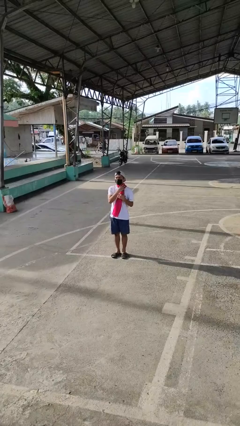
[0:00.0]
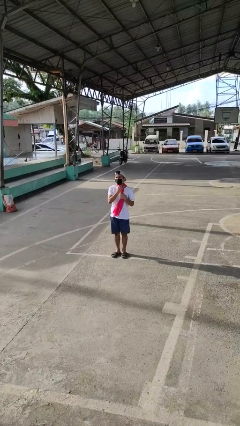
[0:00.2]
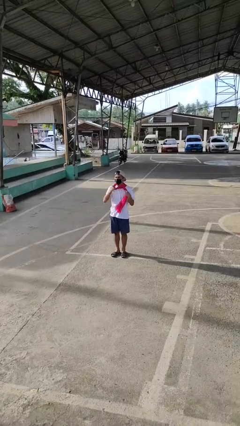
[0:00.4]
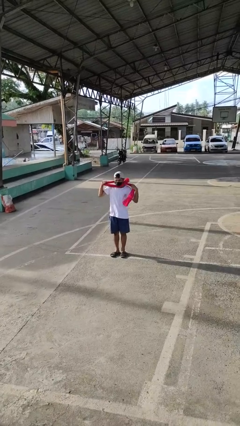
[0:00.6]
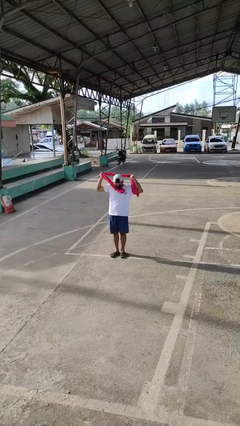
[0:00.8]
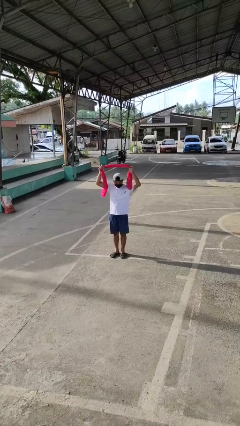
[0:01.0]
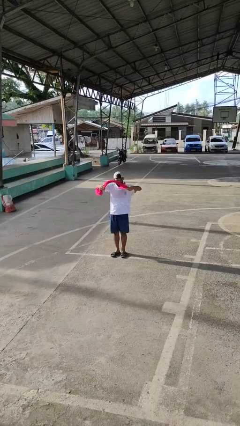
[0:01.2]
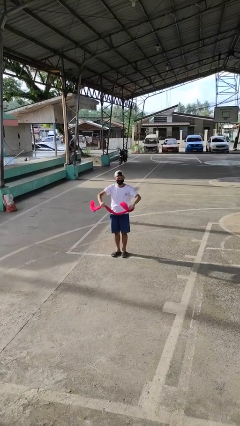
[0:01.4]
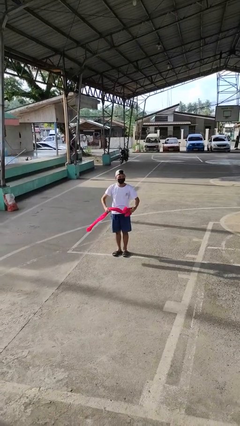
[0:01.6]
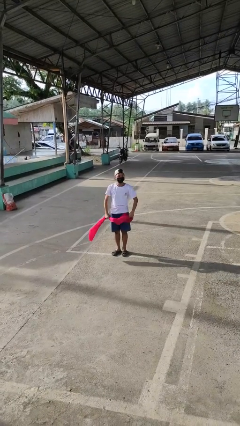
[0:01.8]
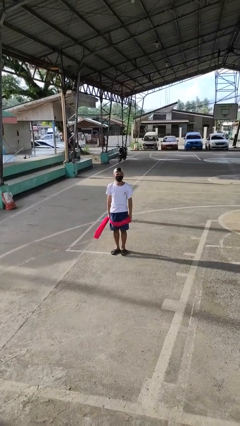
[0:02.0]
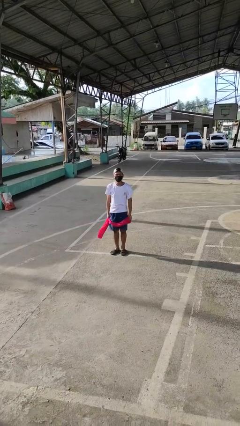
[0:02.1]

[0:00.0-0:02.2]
person takes off scarf

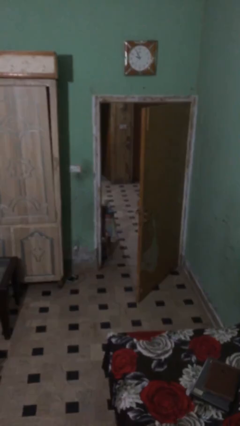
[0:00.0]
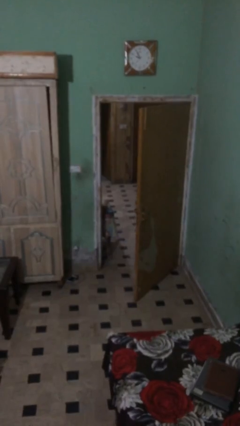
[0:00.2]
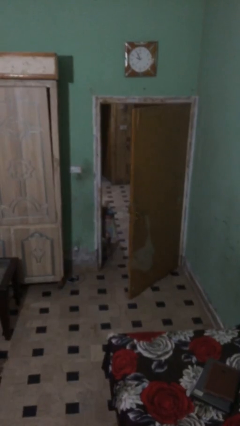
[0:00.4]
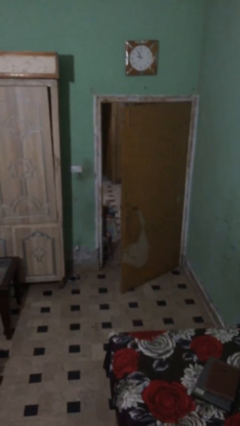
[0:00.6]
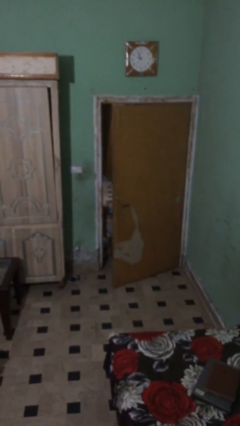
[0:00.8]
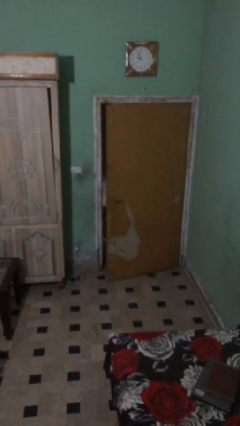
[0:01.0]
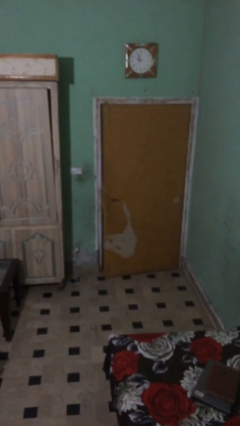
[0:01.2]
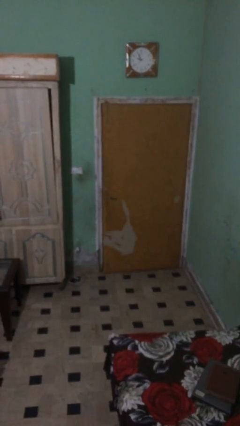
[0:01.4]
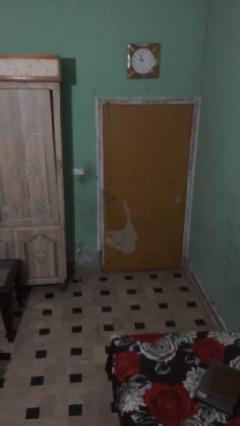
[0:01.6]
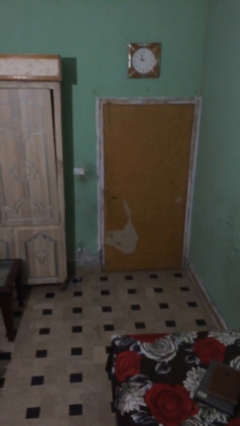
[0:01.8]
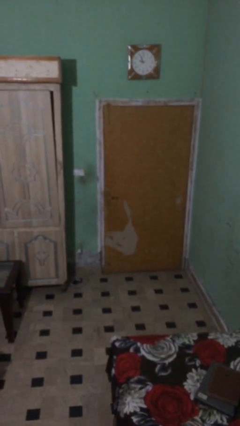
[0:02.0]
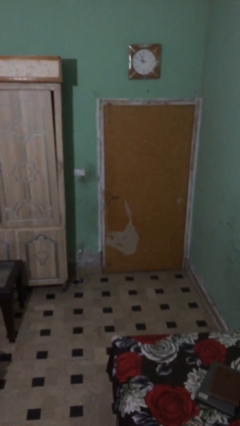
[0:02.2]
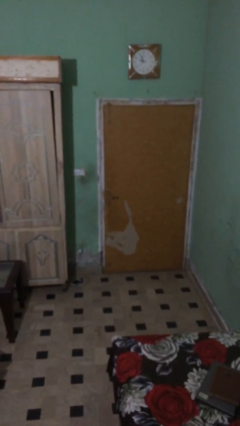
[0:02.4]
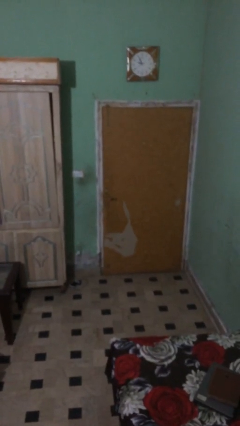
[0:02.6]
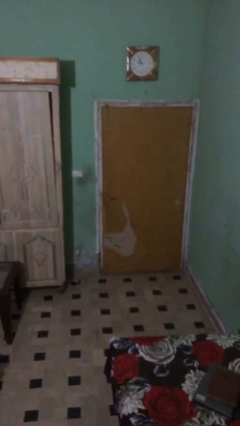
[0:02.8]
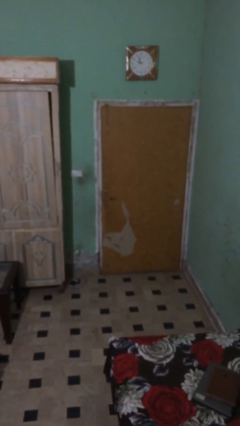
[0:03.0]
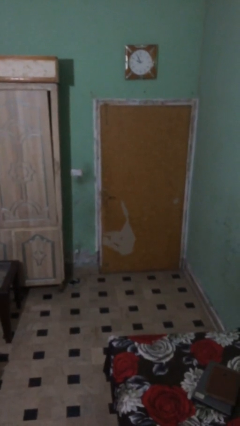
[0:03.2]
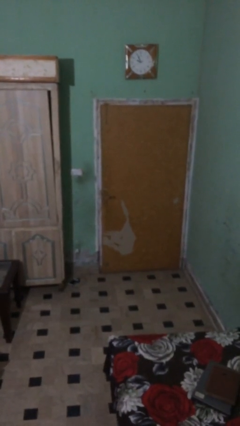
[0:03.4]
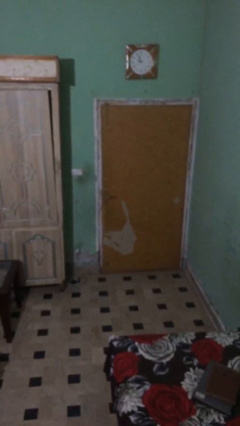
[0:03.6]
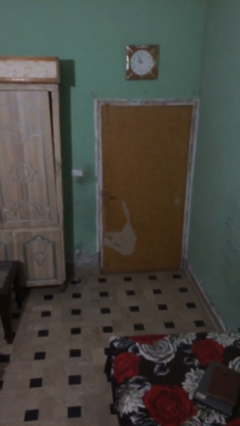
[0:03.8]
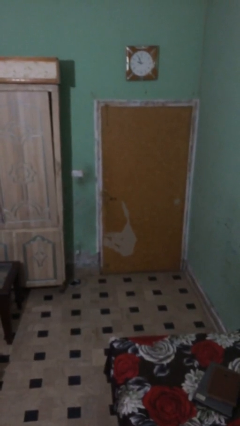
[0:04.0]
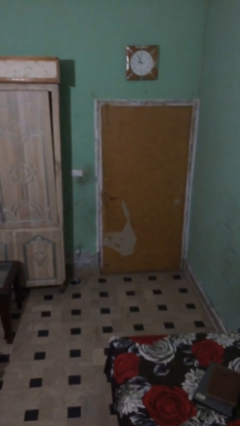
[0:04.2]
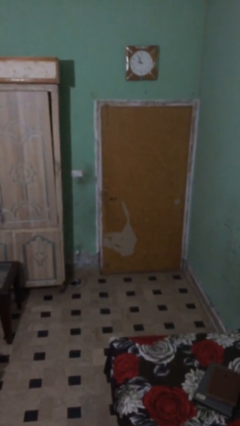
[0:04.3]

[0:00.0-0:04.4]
person closes facility door

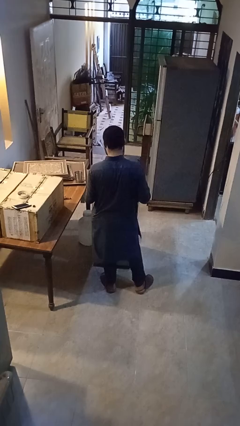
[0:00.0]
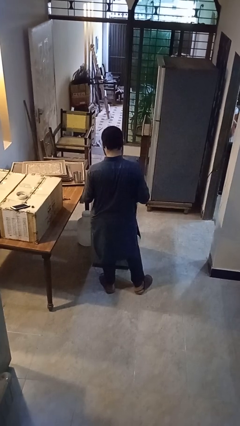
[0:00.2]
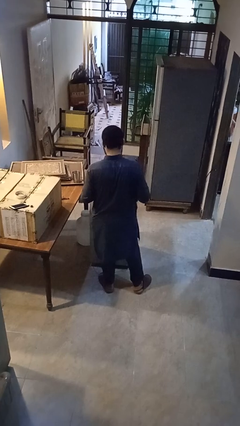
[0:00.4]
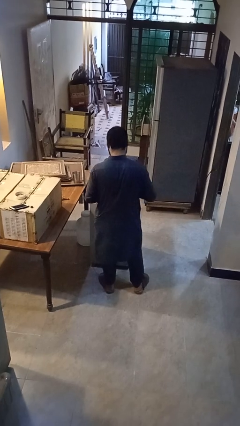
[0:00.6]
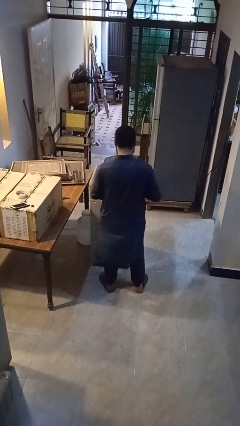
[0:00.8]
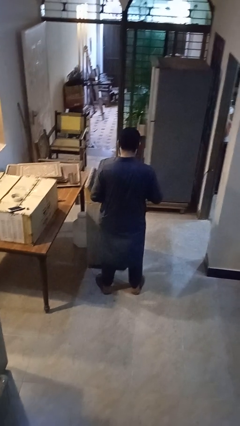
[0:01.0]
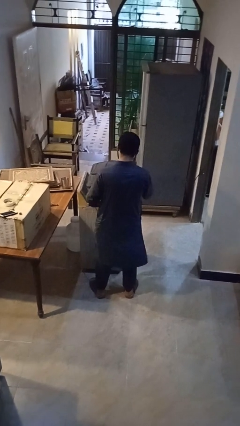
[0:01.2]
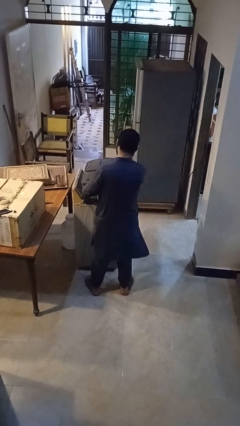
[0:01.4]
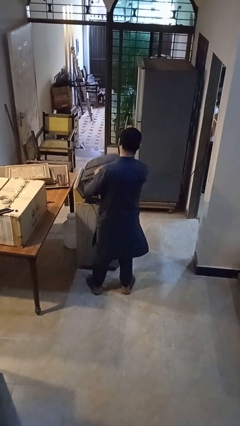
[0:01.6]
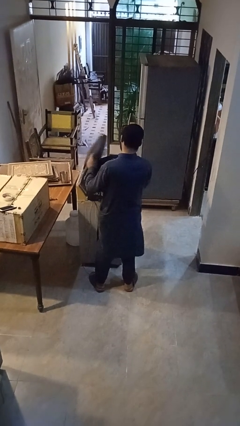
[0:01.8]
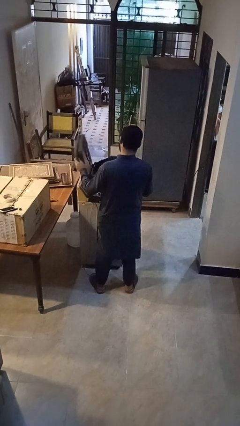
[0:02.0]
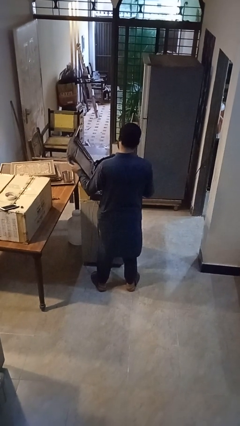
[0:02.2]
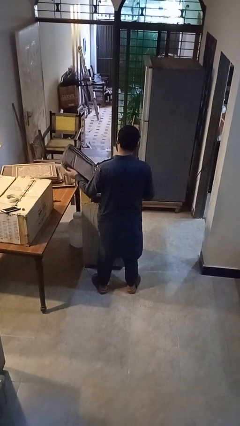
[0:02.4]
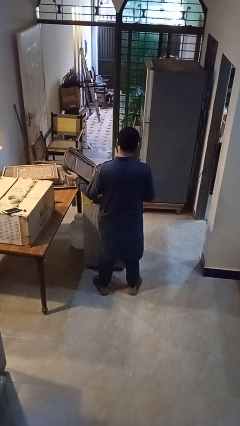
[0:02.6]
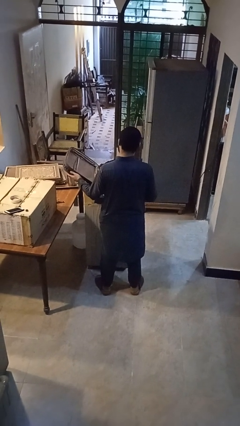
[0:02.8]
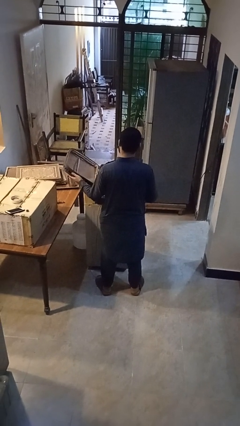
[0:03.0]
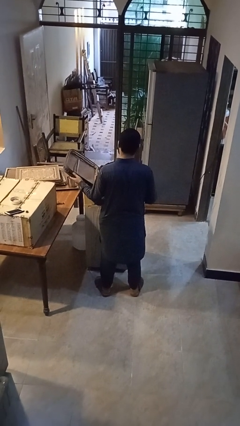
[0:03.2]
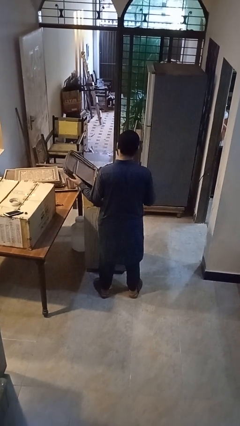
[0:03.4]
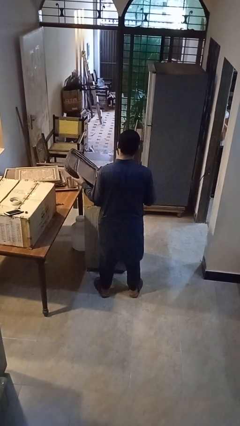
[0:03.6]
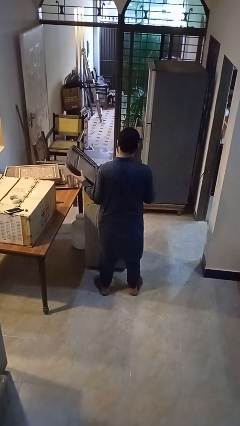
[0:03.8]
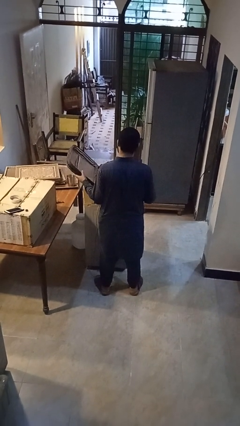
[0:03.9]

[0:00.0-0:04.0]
person opens suitcase

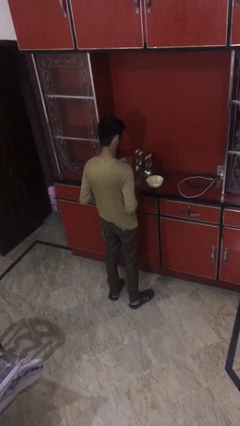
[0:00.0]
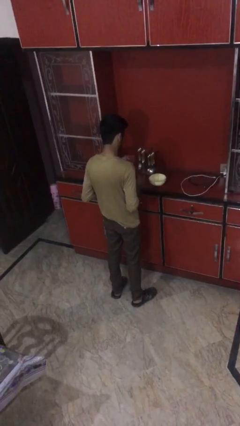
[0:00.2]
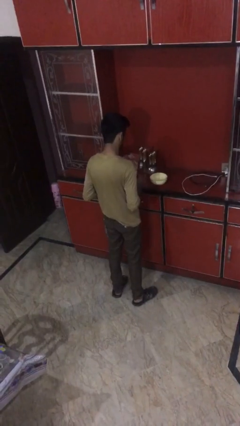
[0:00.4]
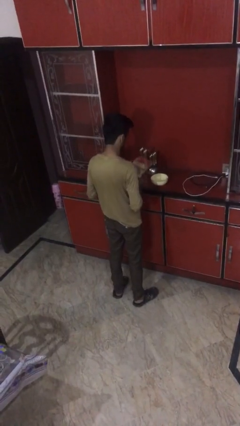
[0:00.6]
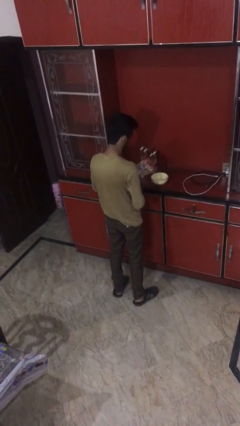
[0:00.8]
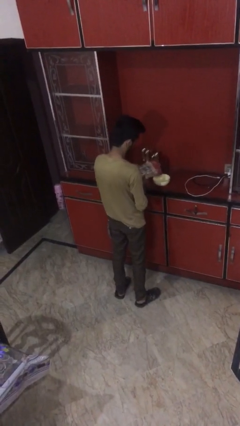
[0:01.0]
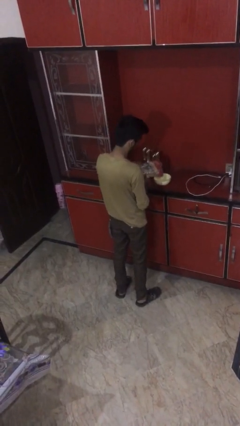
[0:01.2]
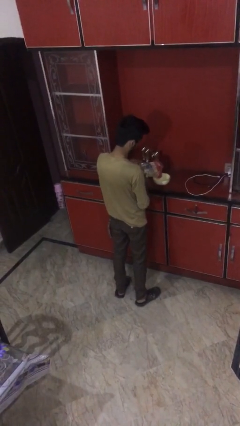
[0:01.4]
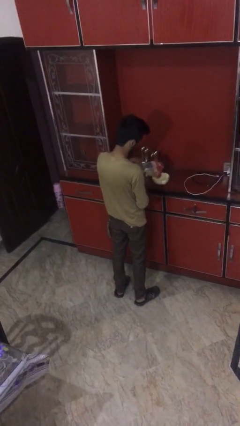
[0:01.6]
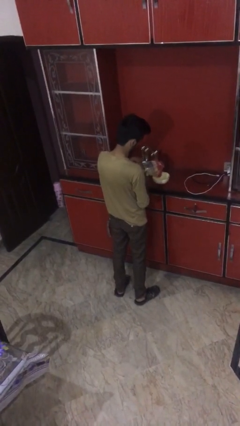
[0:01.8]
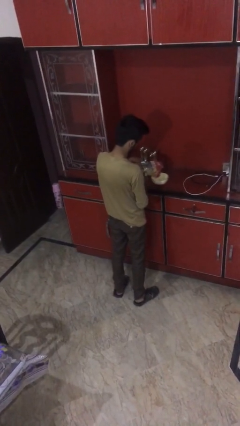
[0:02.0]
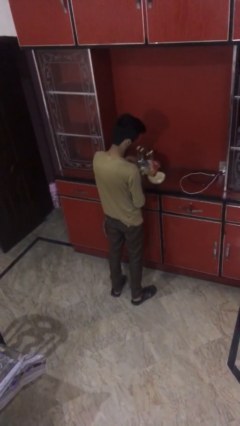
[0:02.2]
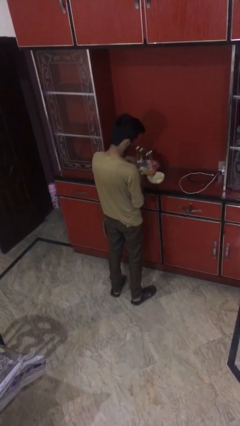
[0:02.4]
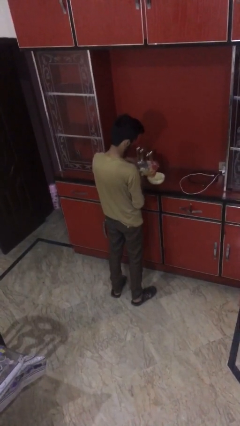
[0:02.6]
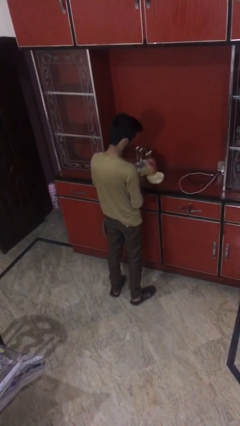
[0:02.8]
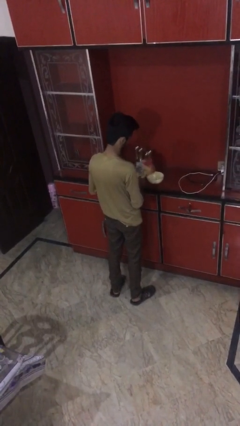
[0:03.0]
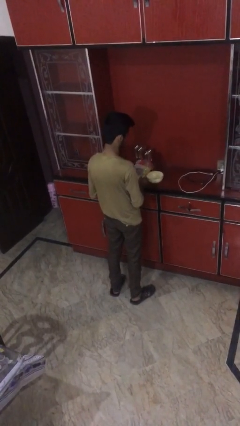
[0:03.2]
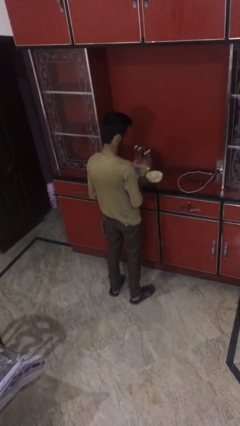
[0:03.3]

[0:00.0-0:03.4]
person pours into bowl

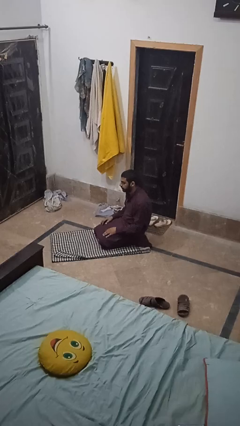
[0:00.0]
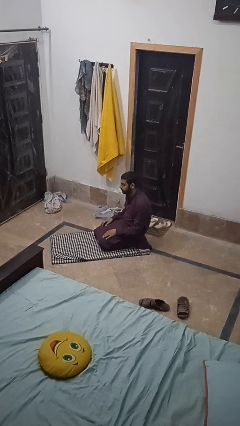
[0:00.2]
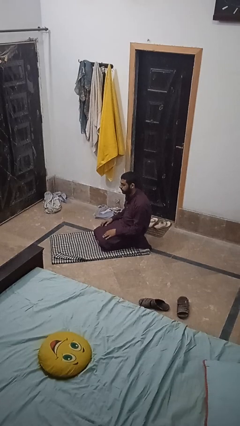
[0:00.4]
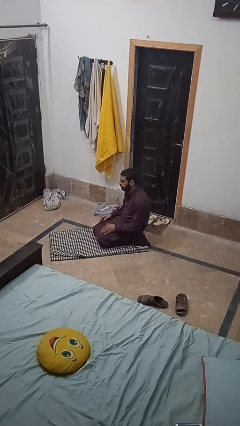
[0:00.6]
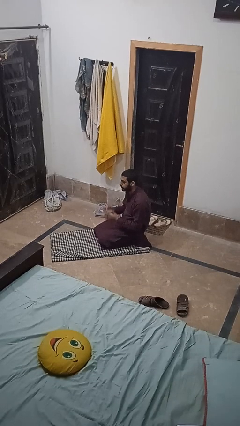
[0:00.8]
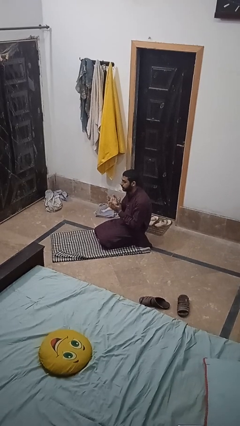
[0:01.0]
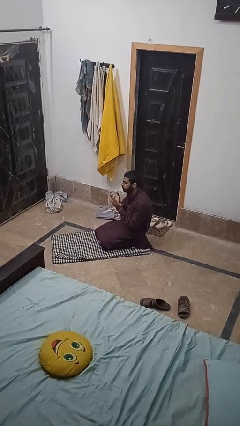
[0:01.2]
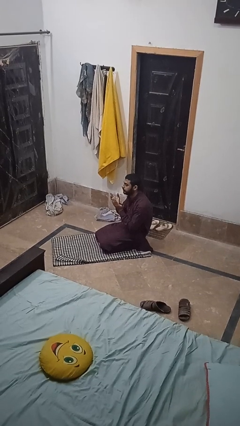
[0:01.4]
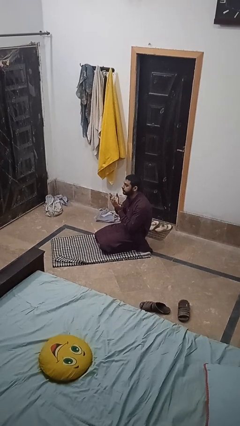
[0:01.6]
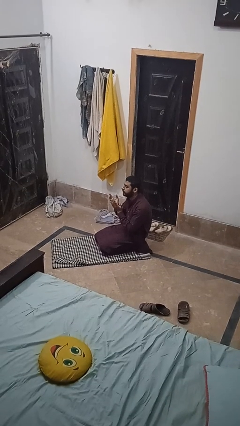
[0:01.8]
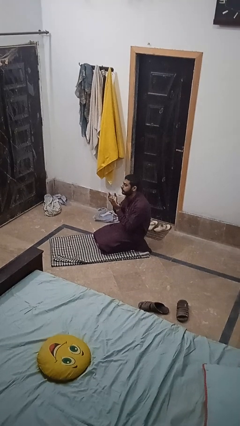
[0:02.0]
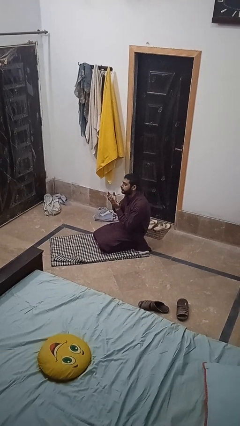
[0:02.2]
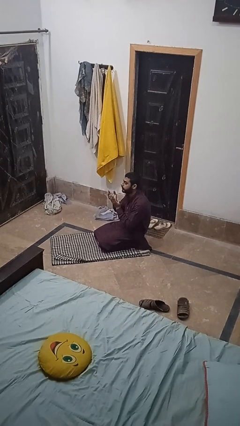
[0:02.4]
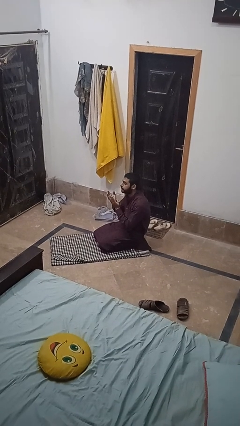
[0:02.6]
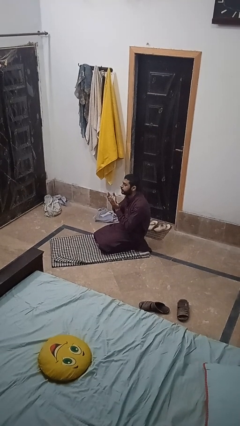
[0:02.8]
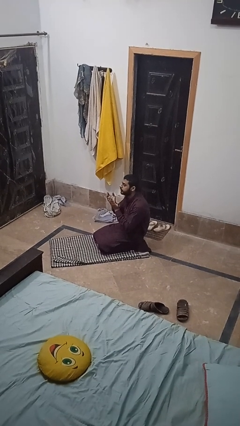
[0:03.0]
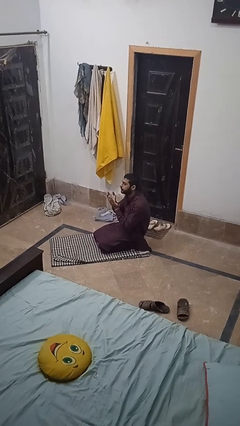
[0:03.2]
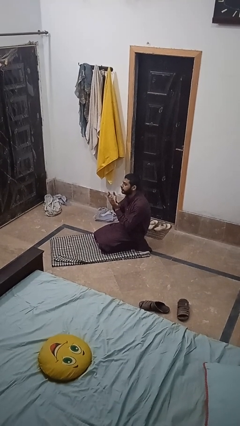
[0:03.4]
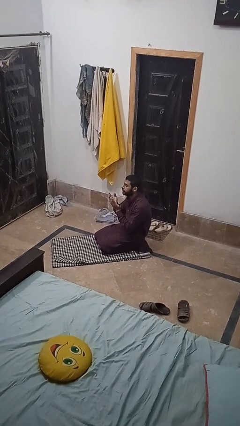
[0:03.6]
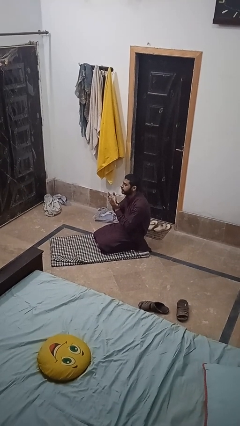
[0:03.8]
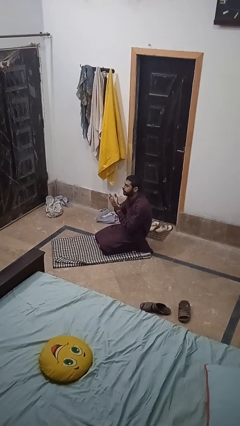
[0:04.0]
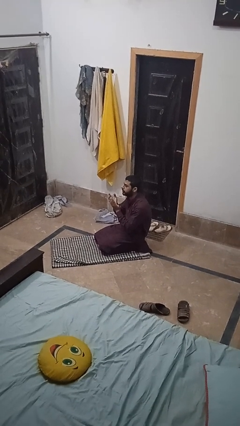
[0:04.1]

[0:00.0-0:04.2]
person prays
